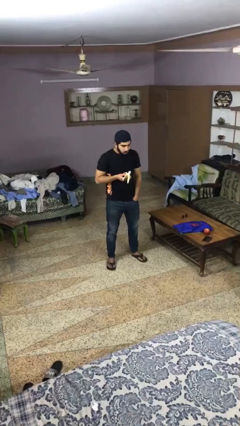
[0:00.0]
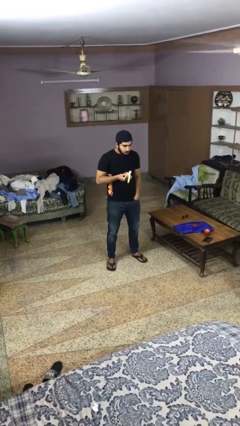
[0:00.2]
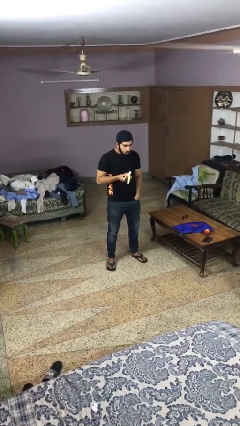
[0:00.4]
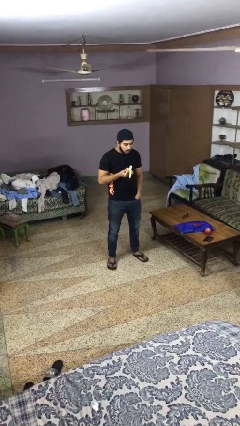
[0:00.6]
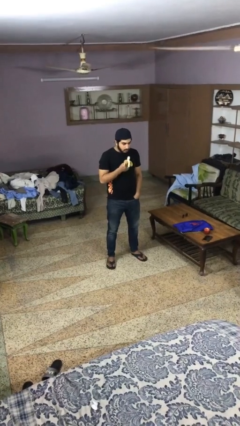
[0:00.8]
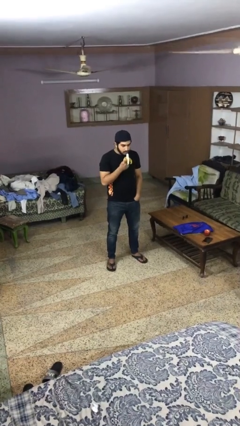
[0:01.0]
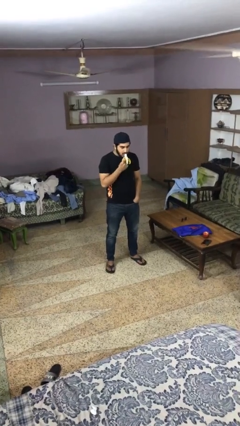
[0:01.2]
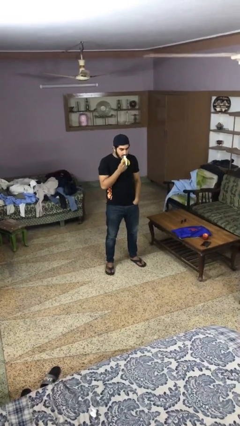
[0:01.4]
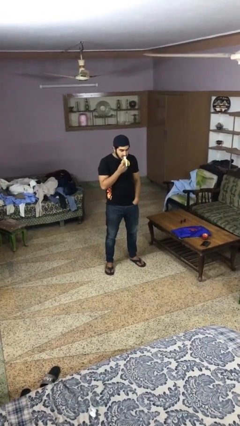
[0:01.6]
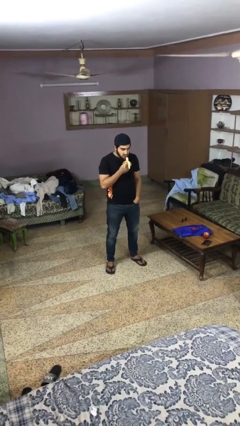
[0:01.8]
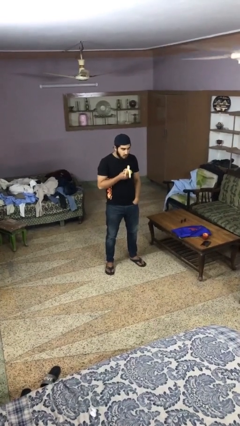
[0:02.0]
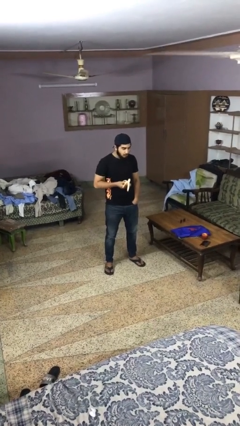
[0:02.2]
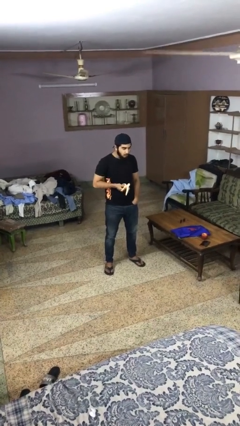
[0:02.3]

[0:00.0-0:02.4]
person eats banana

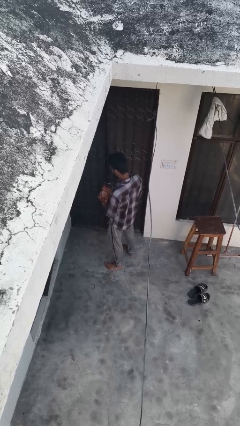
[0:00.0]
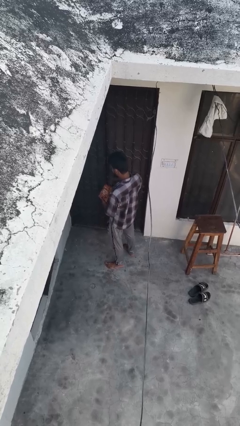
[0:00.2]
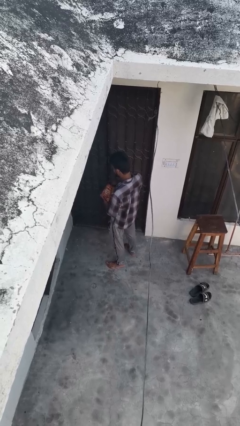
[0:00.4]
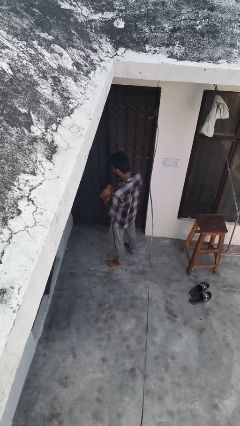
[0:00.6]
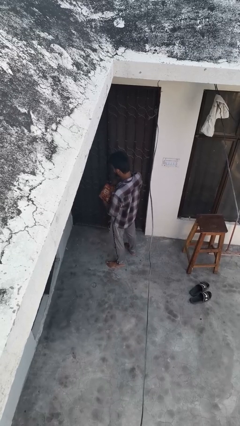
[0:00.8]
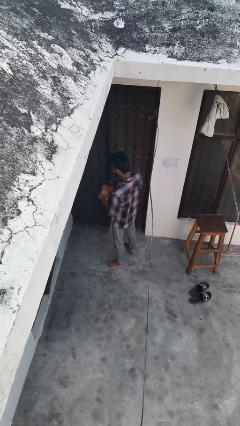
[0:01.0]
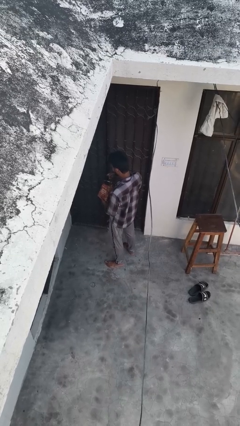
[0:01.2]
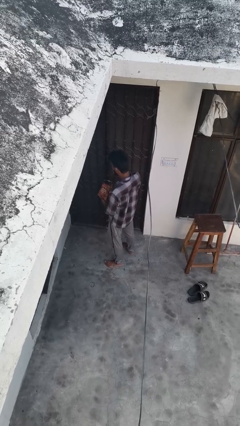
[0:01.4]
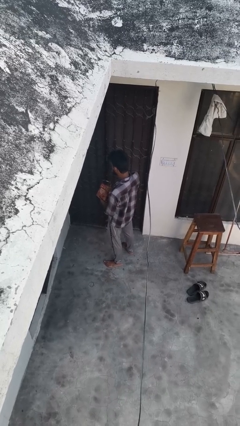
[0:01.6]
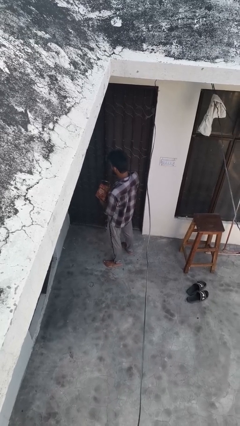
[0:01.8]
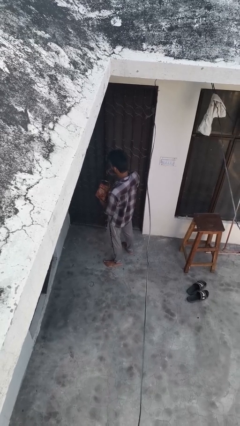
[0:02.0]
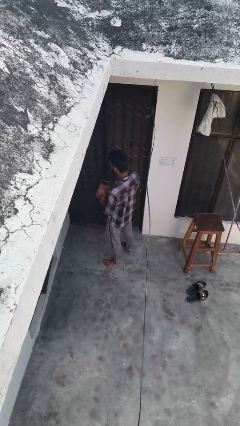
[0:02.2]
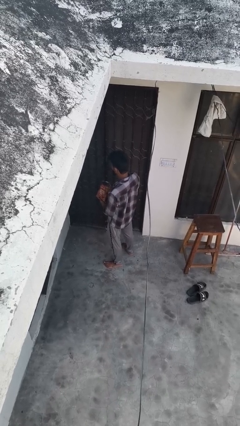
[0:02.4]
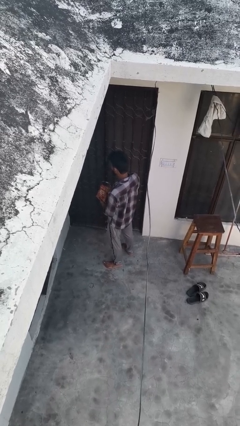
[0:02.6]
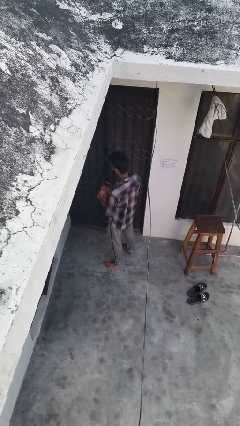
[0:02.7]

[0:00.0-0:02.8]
person eats snack from bag

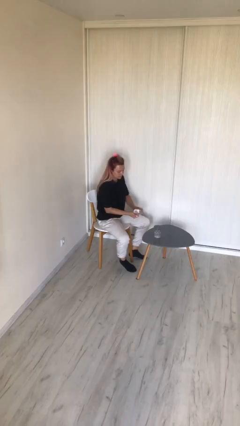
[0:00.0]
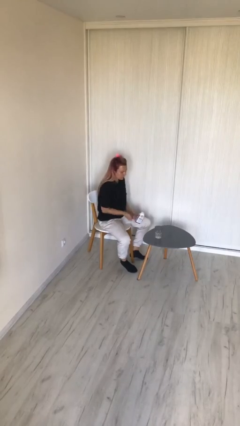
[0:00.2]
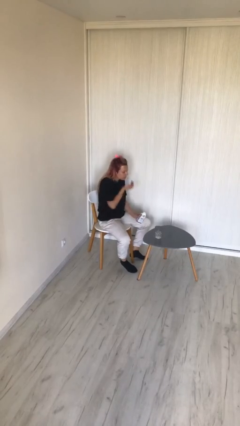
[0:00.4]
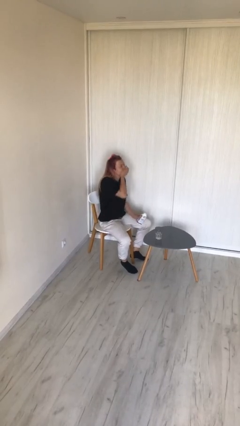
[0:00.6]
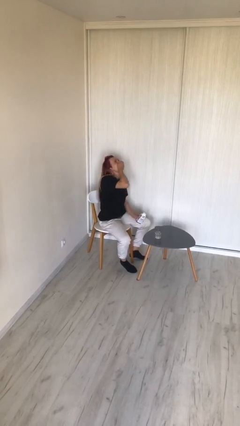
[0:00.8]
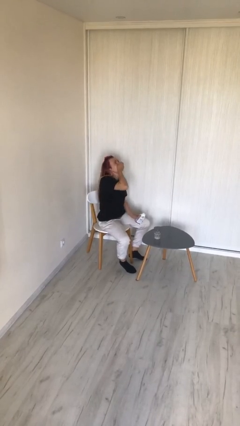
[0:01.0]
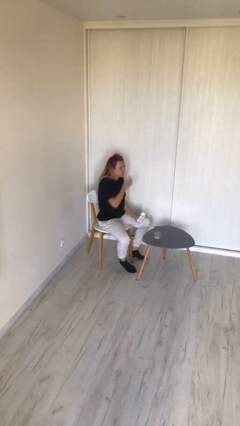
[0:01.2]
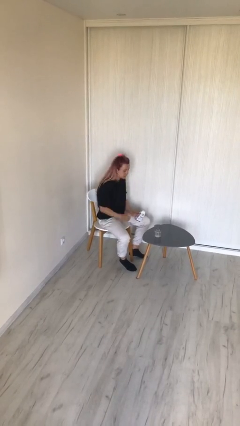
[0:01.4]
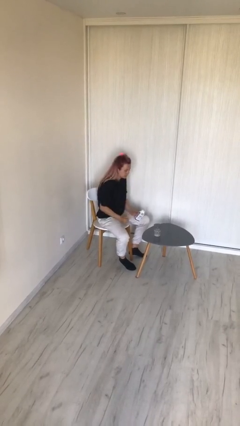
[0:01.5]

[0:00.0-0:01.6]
person takes medicine pills

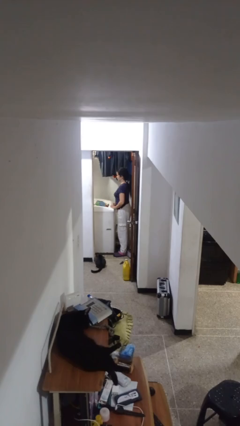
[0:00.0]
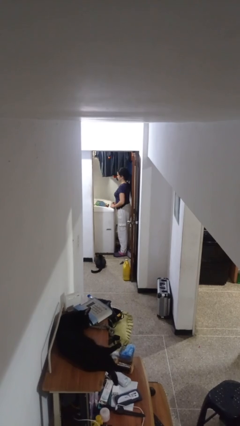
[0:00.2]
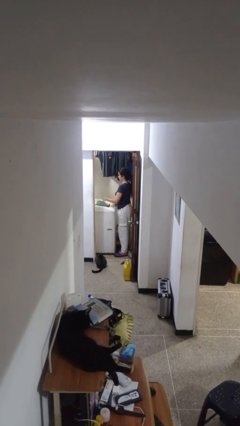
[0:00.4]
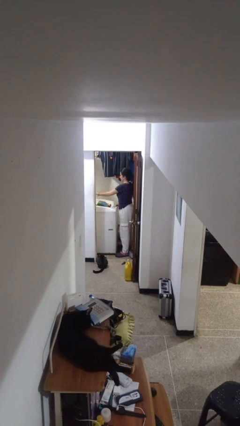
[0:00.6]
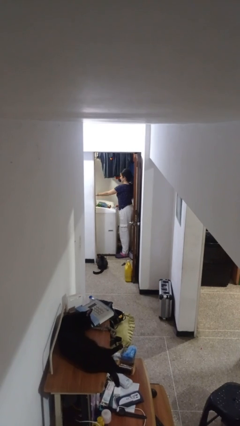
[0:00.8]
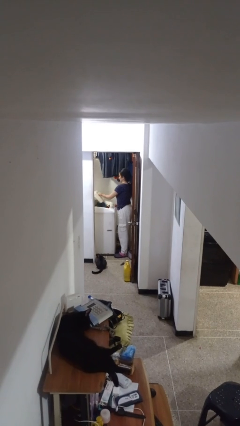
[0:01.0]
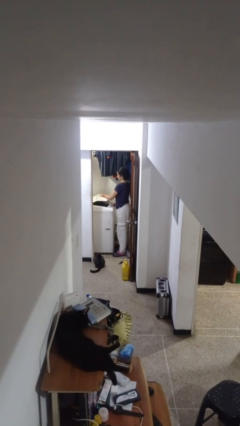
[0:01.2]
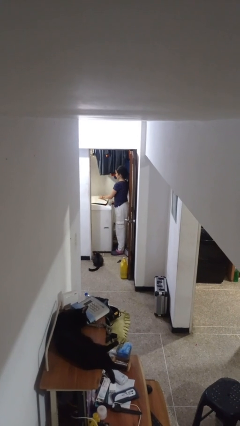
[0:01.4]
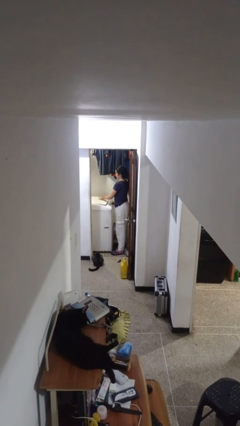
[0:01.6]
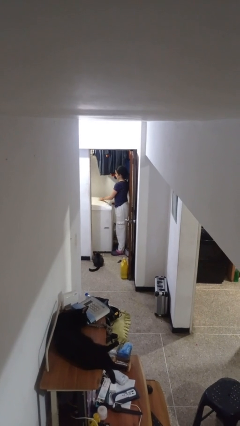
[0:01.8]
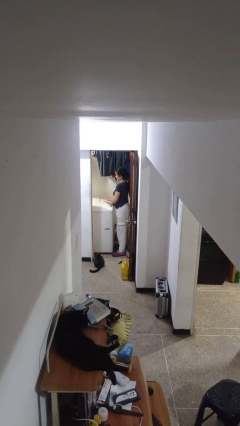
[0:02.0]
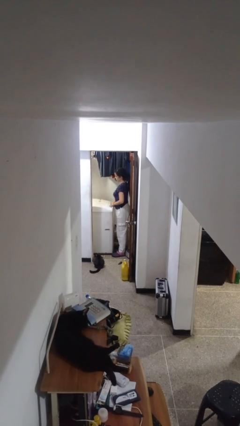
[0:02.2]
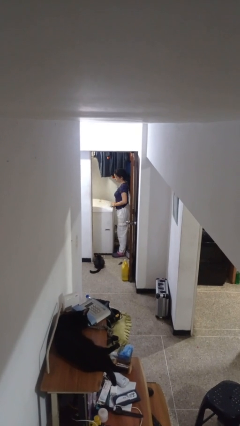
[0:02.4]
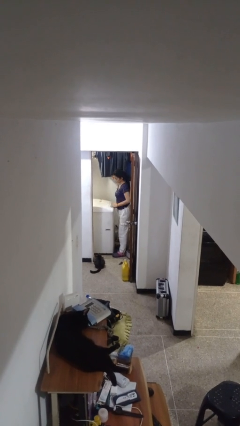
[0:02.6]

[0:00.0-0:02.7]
person closes clothes washer

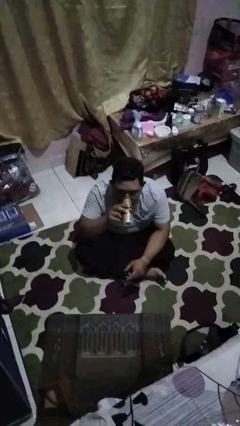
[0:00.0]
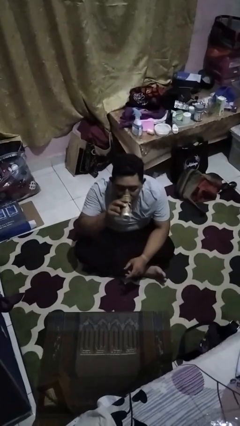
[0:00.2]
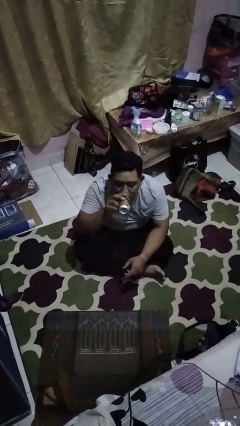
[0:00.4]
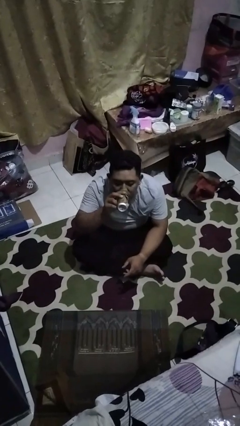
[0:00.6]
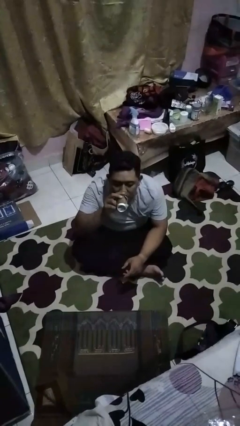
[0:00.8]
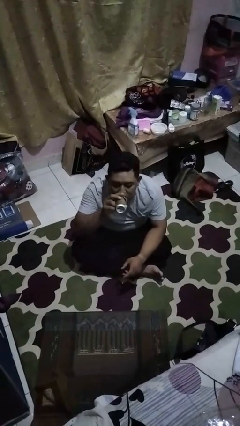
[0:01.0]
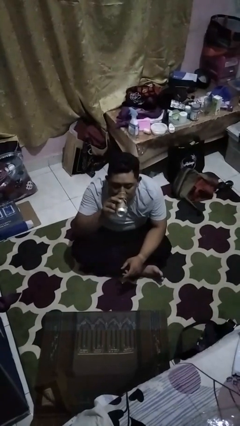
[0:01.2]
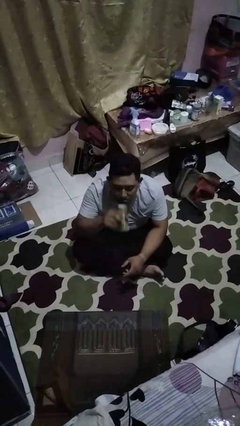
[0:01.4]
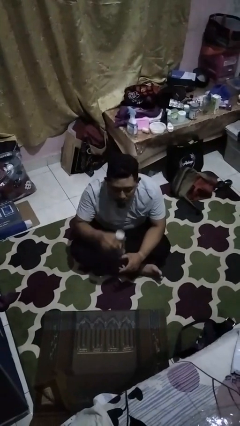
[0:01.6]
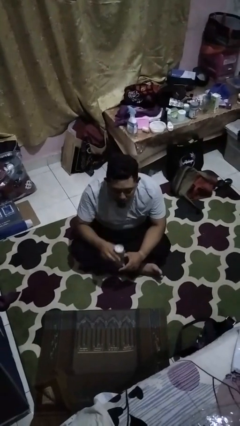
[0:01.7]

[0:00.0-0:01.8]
person drinks from beverage can

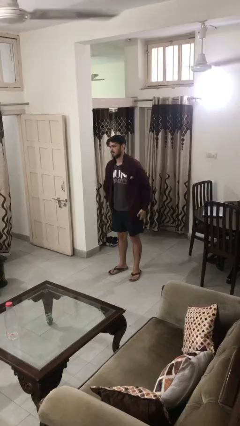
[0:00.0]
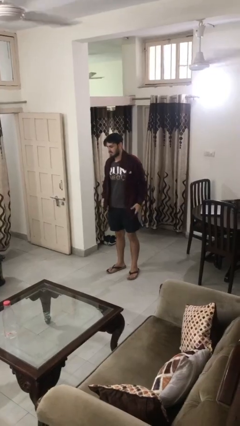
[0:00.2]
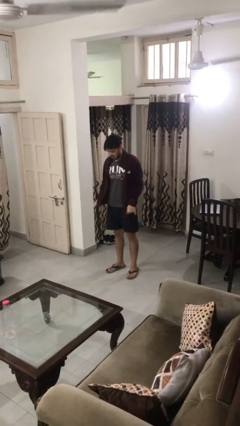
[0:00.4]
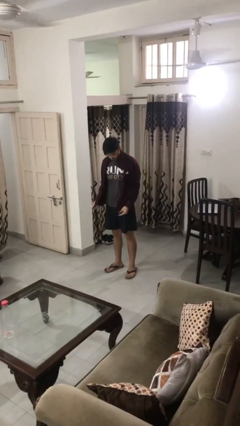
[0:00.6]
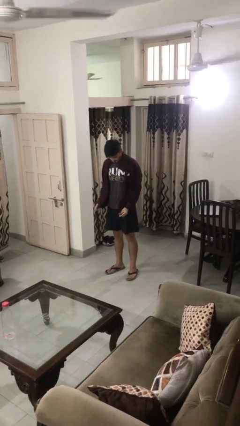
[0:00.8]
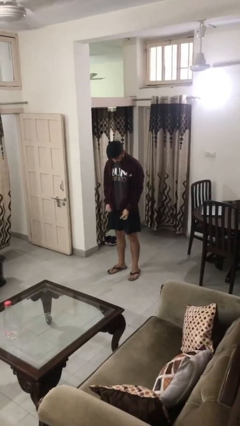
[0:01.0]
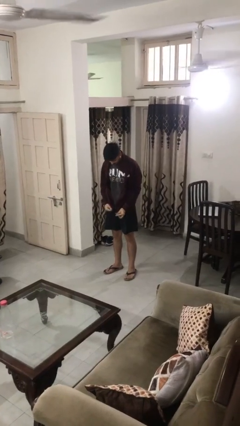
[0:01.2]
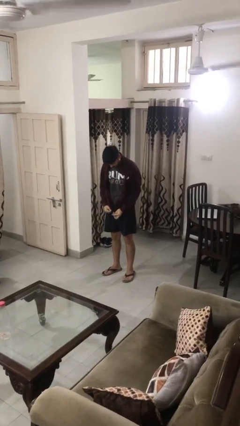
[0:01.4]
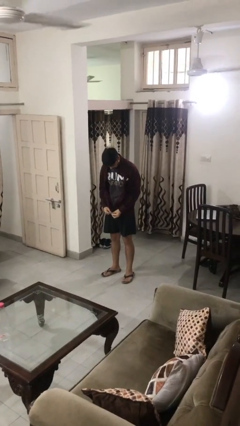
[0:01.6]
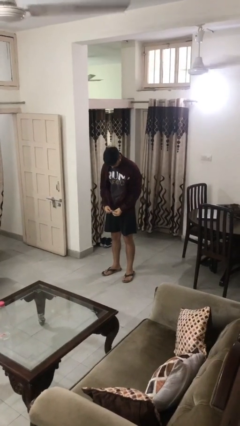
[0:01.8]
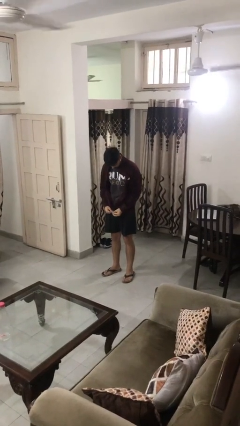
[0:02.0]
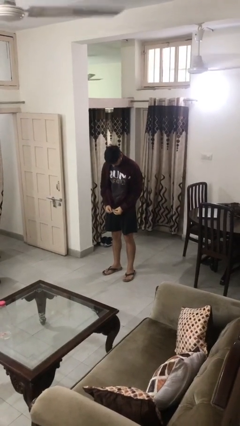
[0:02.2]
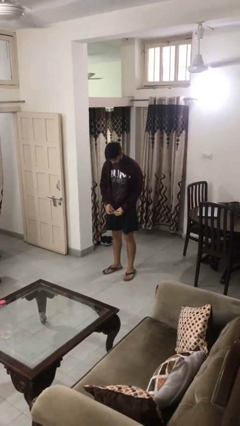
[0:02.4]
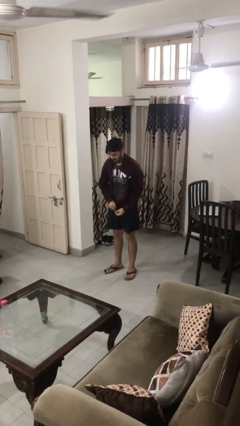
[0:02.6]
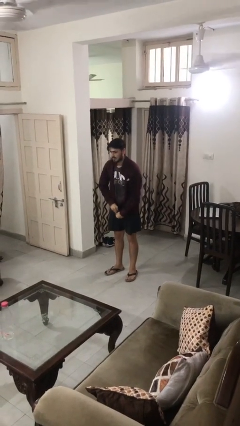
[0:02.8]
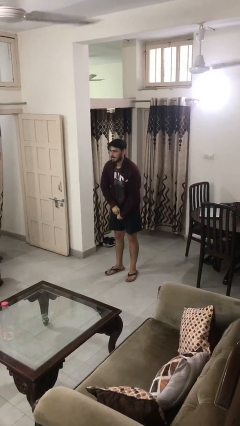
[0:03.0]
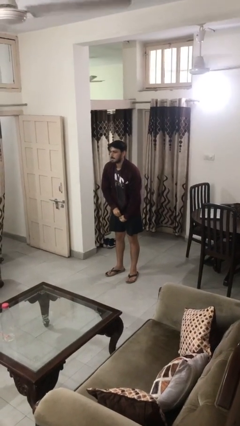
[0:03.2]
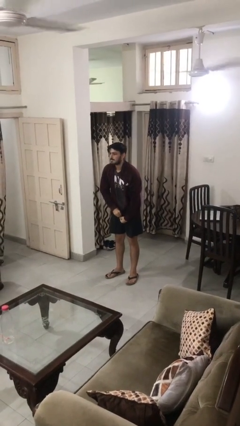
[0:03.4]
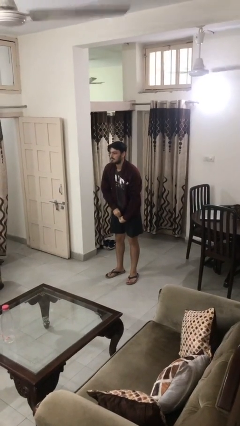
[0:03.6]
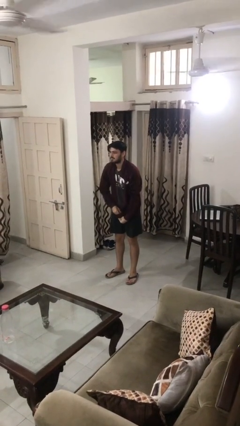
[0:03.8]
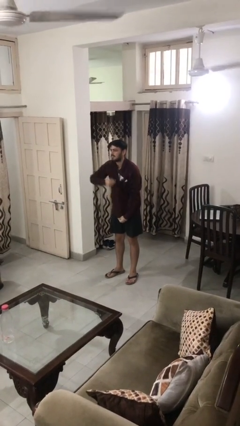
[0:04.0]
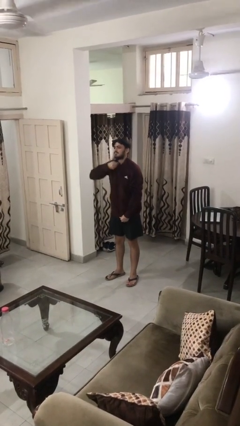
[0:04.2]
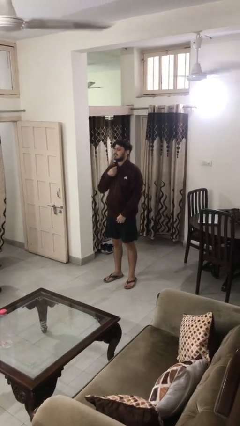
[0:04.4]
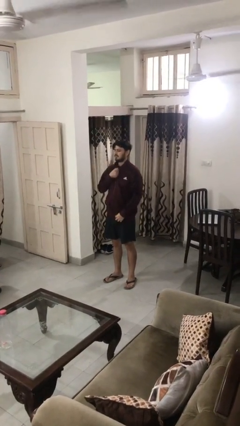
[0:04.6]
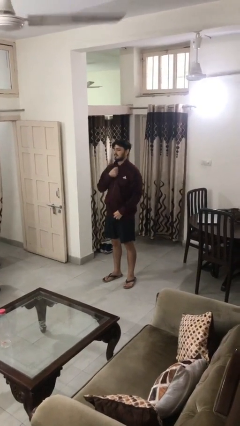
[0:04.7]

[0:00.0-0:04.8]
person zips up jacket

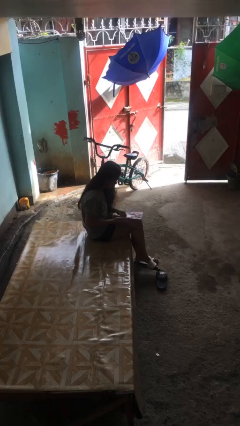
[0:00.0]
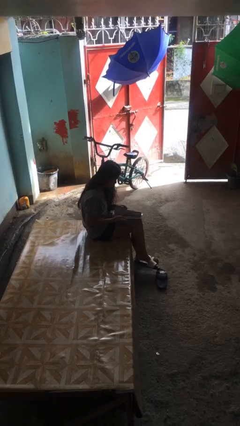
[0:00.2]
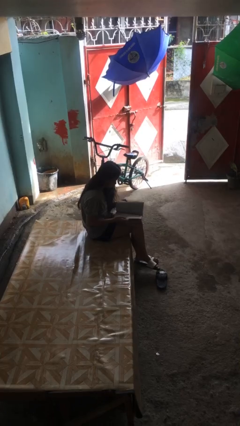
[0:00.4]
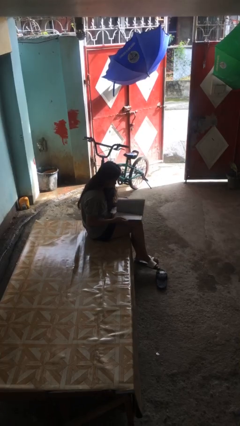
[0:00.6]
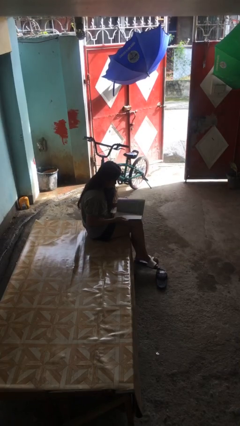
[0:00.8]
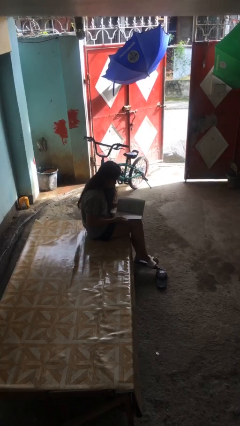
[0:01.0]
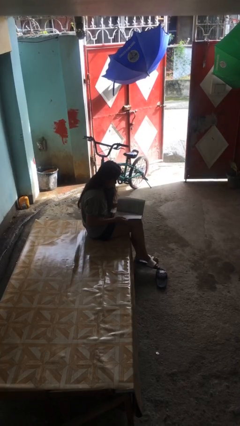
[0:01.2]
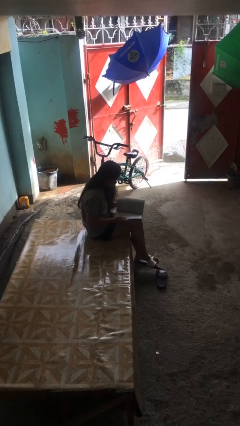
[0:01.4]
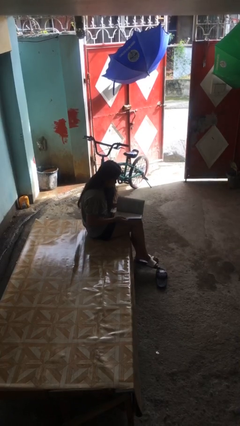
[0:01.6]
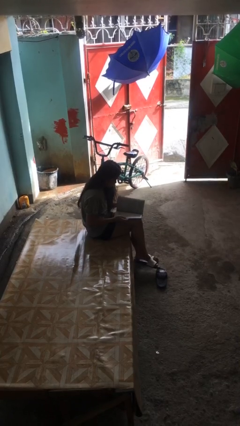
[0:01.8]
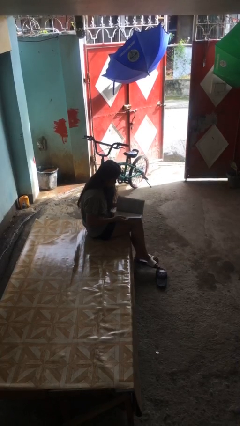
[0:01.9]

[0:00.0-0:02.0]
person reads document
